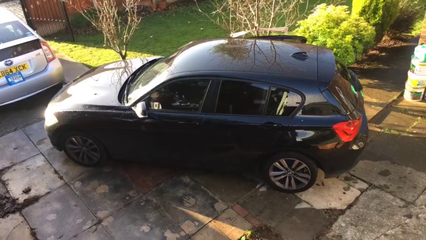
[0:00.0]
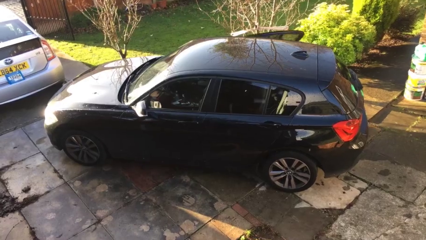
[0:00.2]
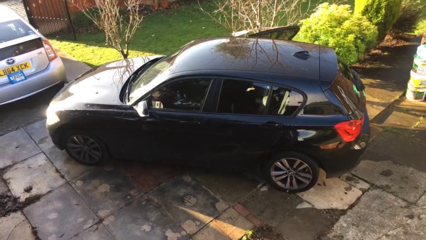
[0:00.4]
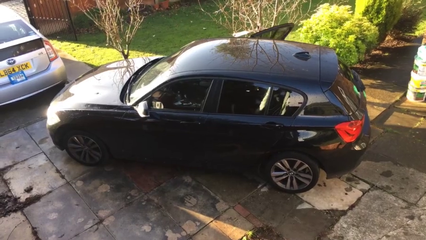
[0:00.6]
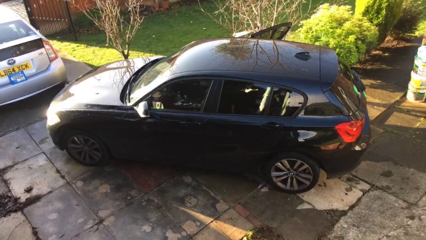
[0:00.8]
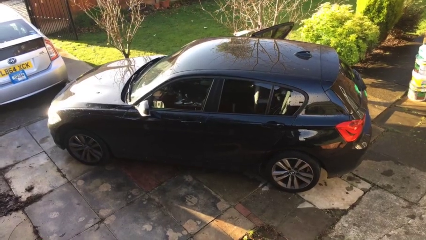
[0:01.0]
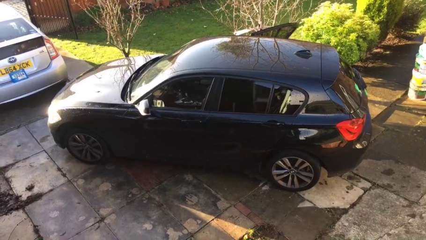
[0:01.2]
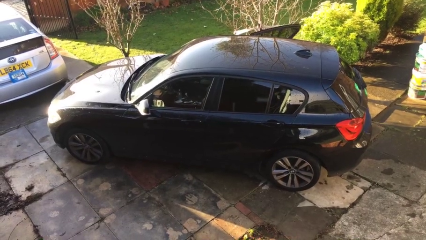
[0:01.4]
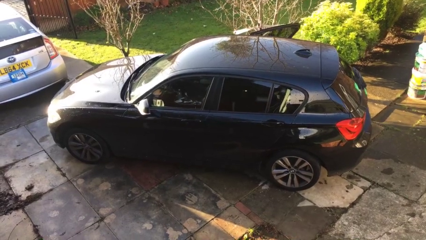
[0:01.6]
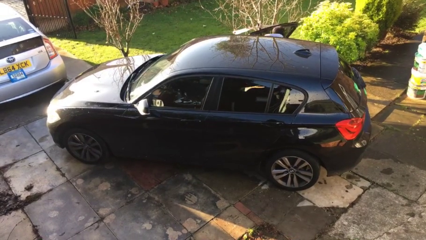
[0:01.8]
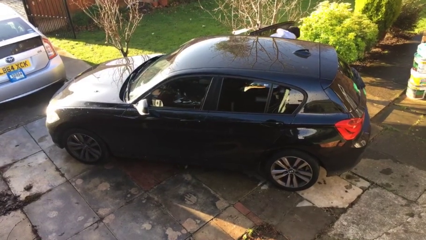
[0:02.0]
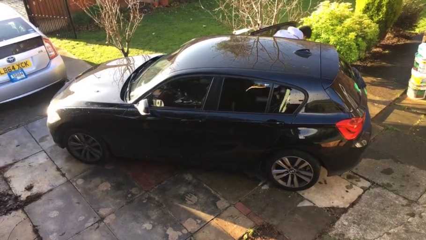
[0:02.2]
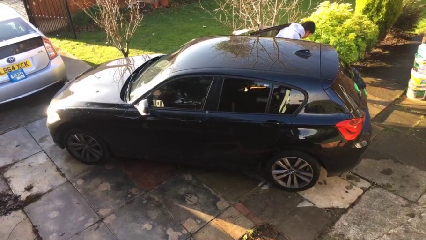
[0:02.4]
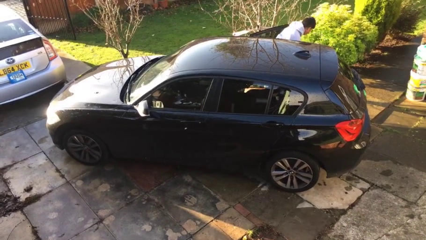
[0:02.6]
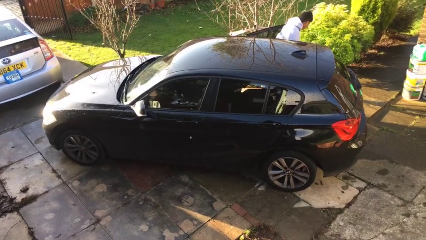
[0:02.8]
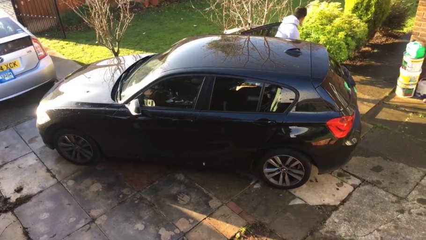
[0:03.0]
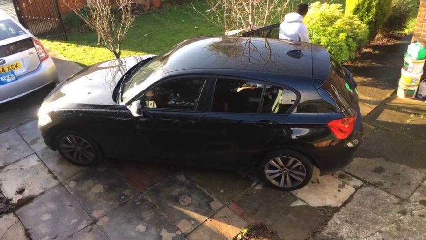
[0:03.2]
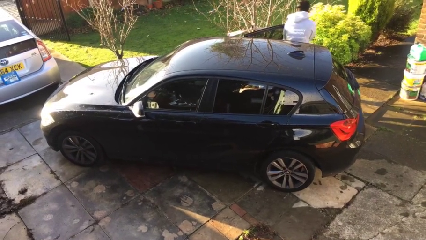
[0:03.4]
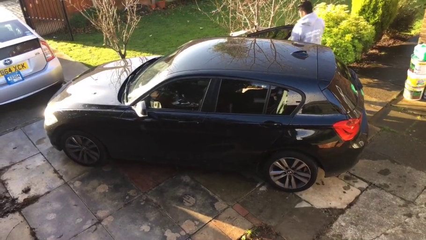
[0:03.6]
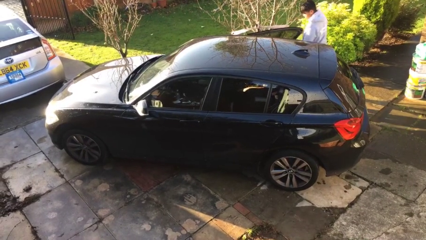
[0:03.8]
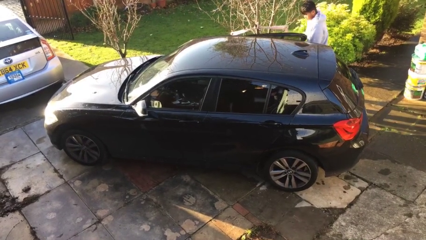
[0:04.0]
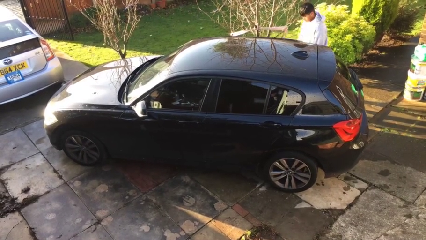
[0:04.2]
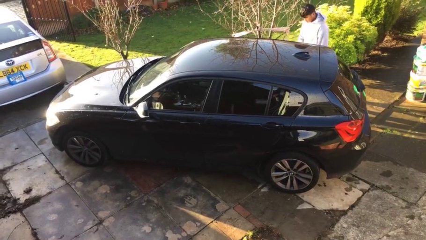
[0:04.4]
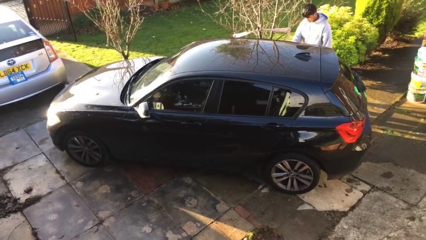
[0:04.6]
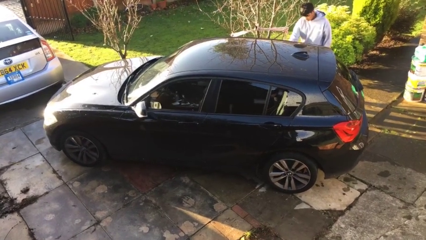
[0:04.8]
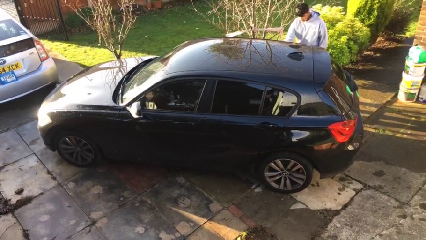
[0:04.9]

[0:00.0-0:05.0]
car drops off person

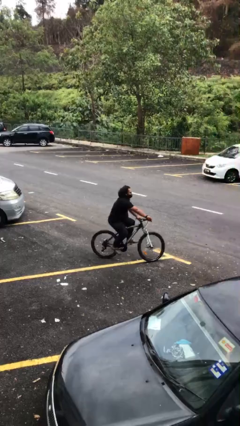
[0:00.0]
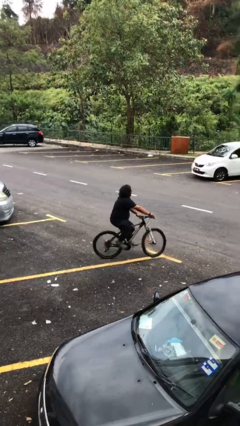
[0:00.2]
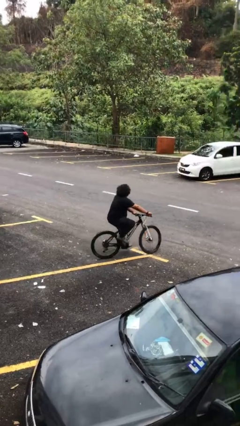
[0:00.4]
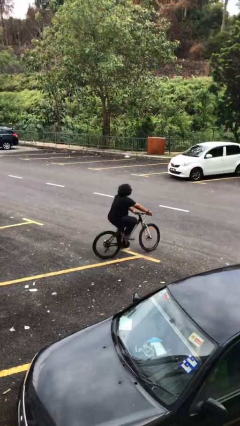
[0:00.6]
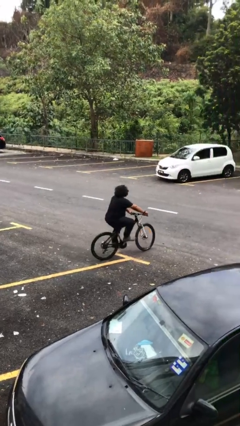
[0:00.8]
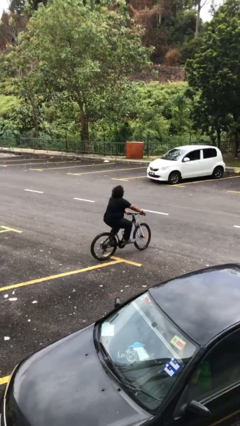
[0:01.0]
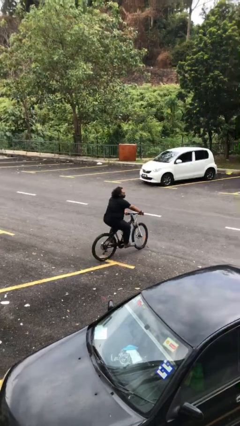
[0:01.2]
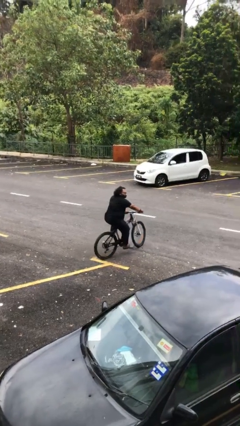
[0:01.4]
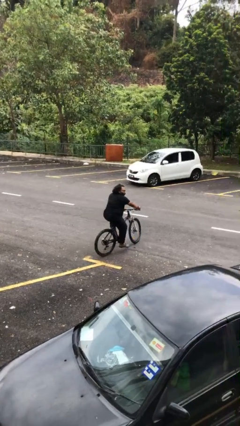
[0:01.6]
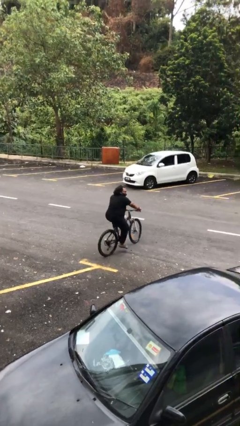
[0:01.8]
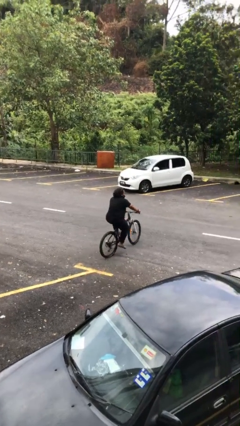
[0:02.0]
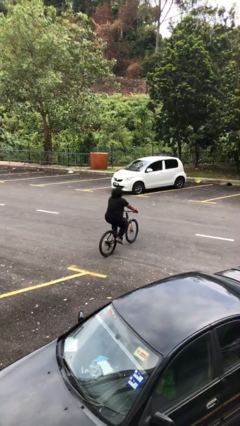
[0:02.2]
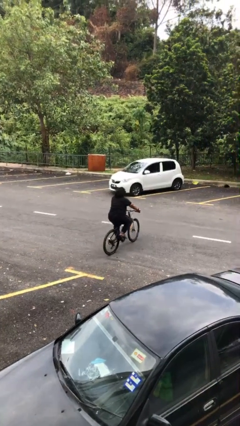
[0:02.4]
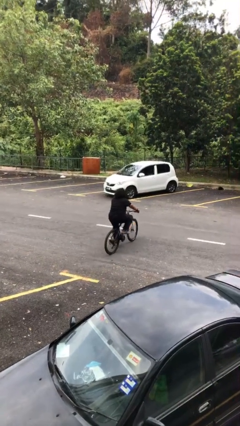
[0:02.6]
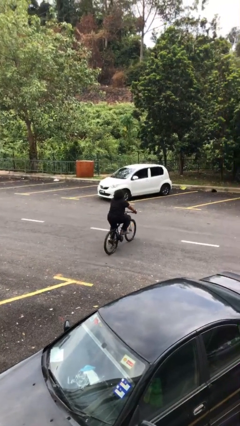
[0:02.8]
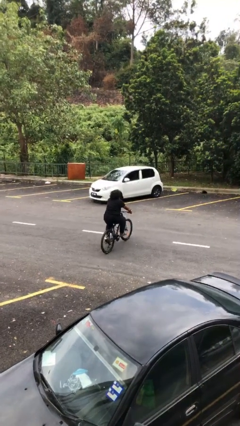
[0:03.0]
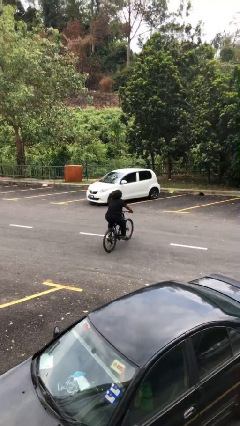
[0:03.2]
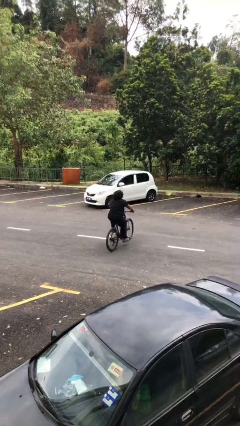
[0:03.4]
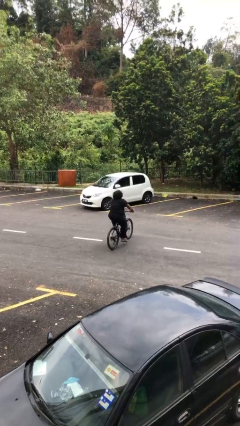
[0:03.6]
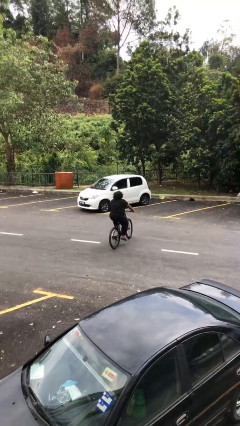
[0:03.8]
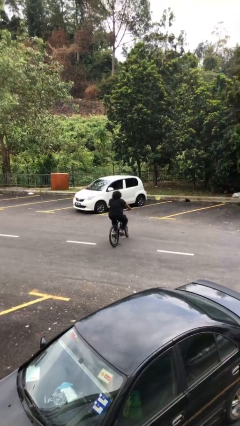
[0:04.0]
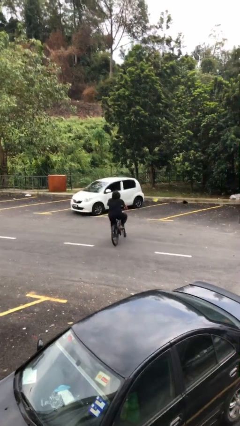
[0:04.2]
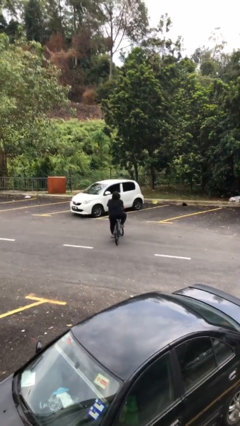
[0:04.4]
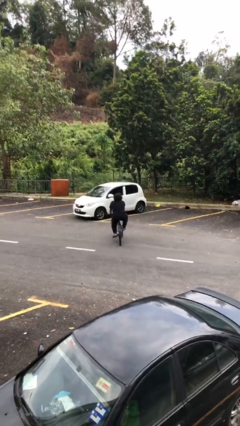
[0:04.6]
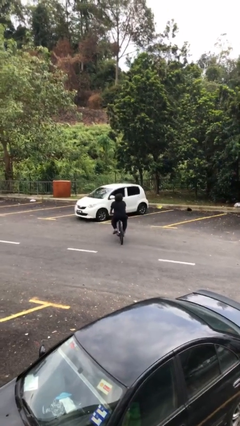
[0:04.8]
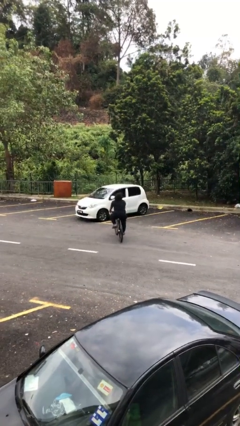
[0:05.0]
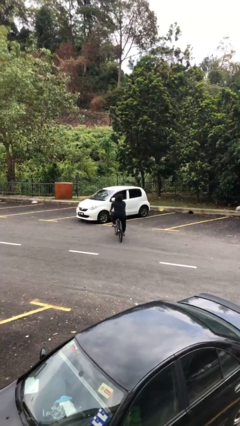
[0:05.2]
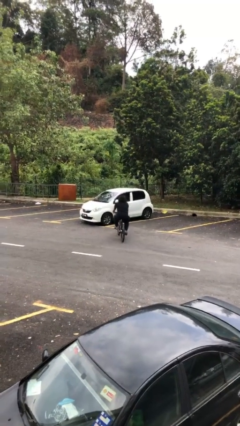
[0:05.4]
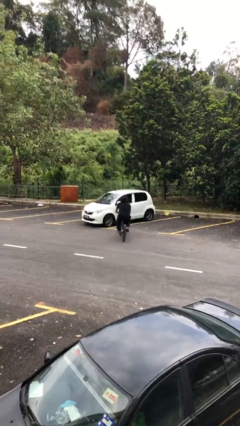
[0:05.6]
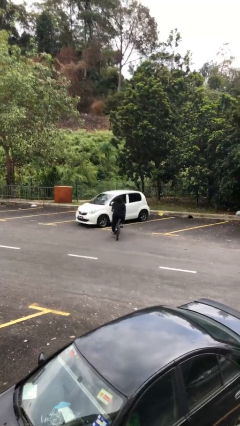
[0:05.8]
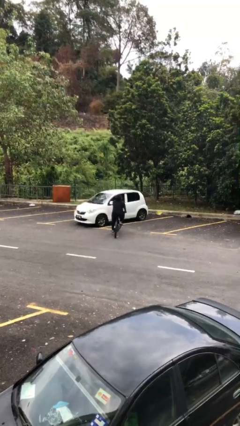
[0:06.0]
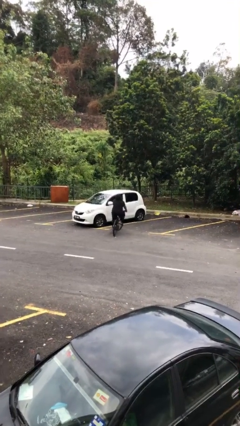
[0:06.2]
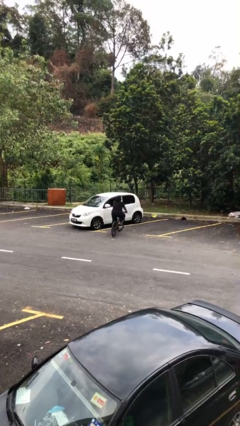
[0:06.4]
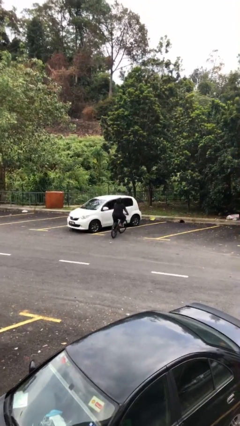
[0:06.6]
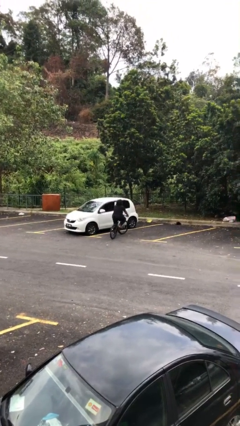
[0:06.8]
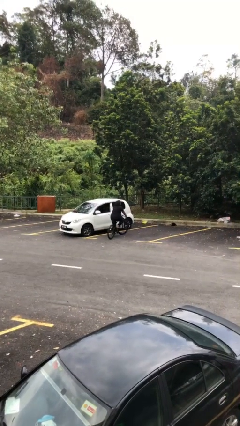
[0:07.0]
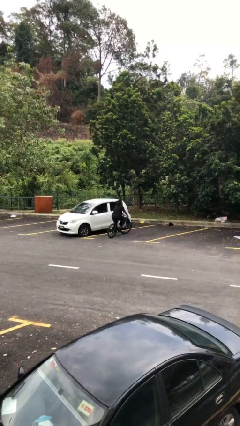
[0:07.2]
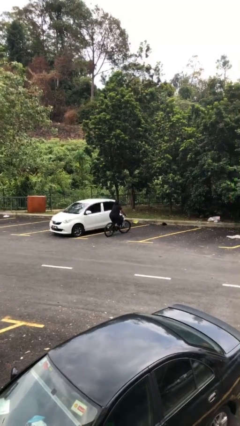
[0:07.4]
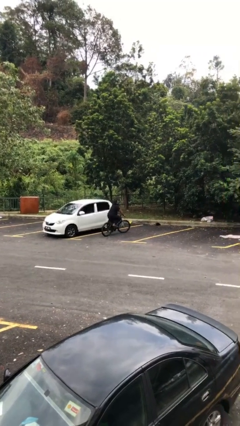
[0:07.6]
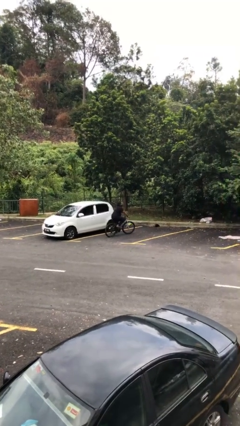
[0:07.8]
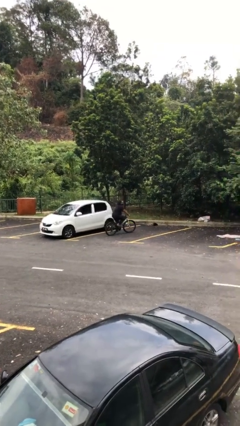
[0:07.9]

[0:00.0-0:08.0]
person rides bicycle

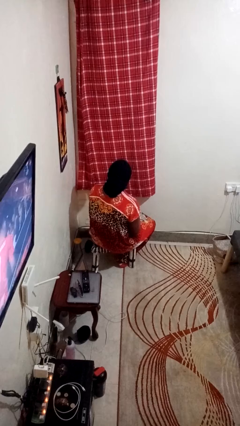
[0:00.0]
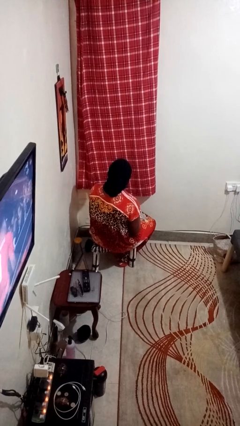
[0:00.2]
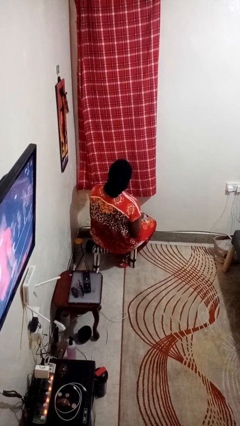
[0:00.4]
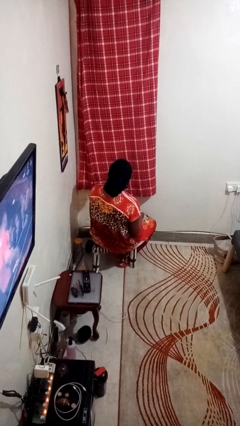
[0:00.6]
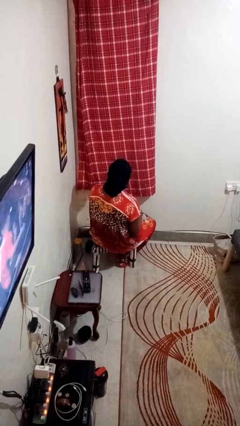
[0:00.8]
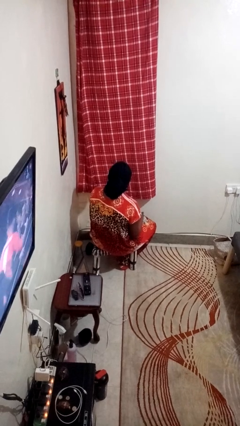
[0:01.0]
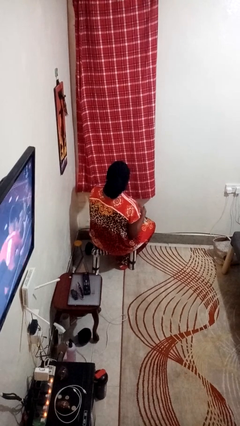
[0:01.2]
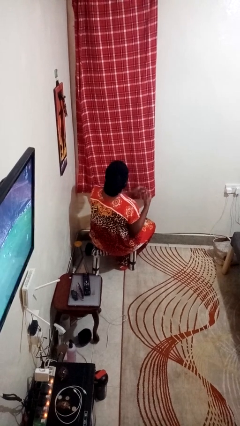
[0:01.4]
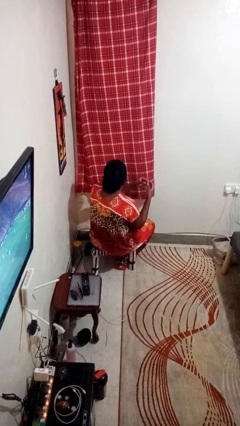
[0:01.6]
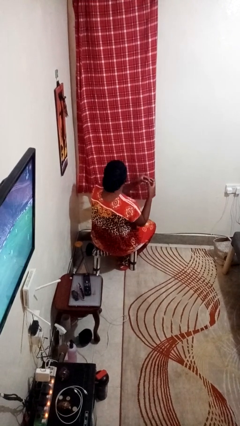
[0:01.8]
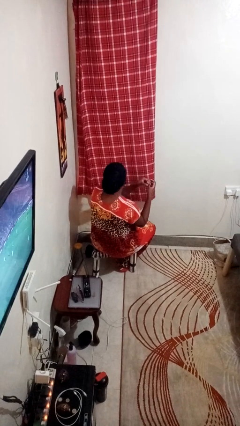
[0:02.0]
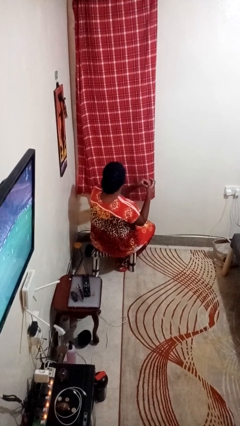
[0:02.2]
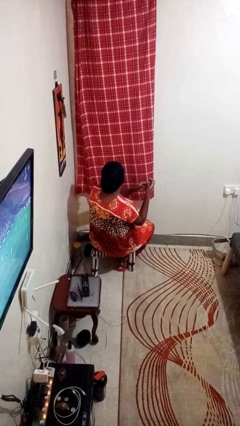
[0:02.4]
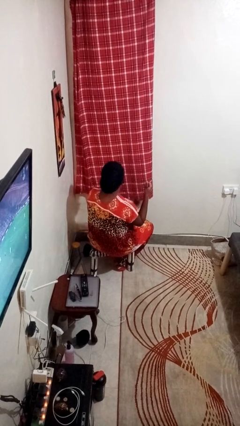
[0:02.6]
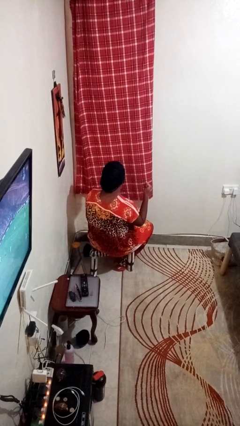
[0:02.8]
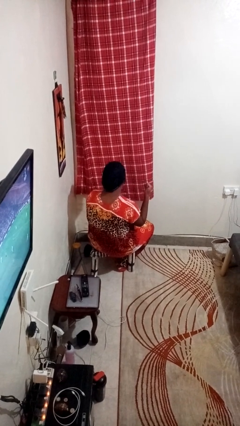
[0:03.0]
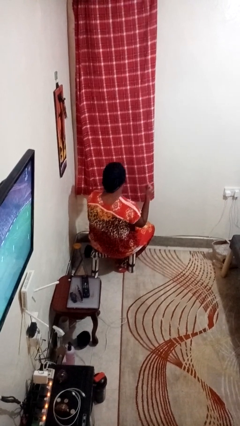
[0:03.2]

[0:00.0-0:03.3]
person puts on ring

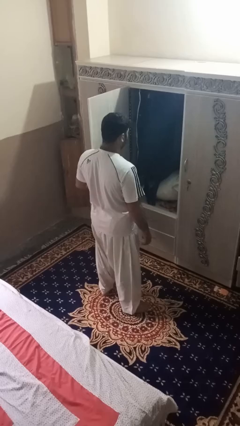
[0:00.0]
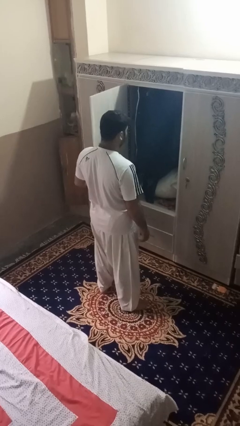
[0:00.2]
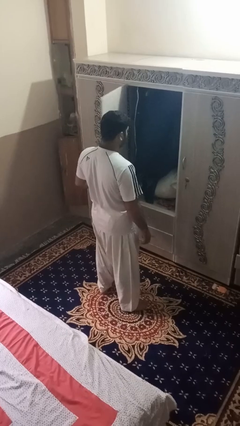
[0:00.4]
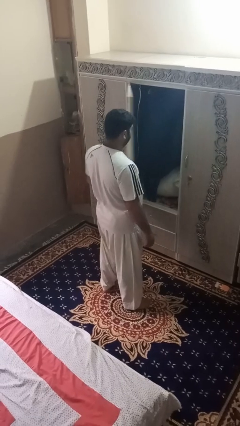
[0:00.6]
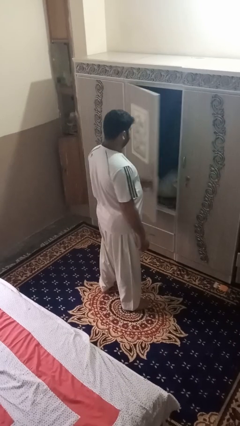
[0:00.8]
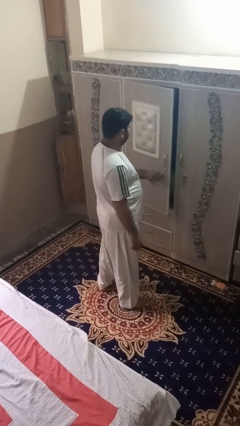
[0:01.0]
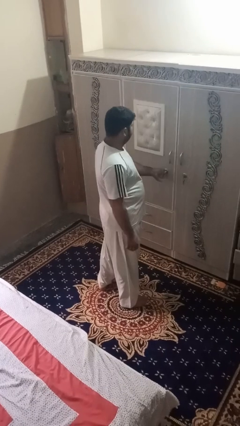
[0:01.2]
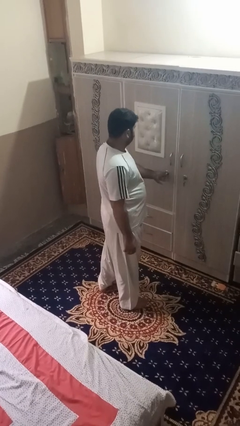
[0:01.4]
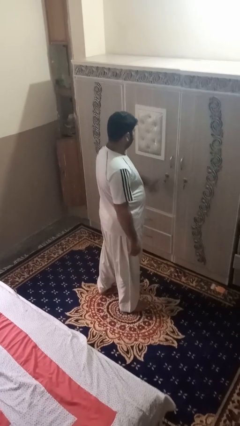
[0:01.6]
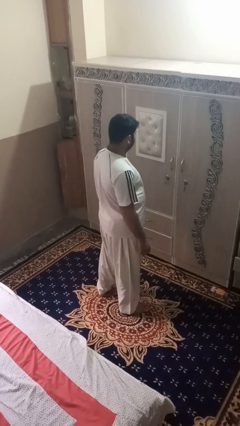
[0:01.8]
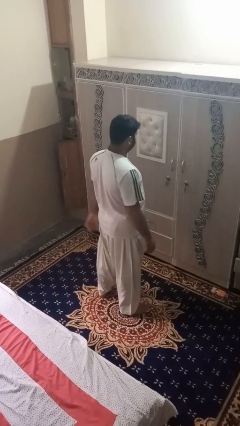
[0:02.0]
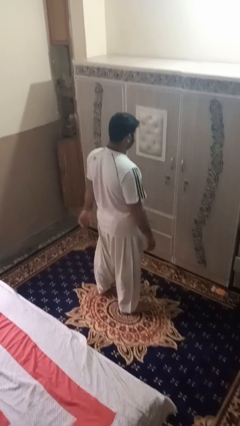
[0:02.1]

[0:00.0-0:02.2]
person closes dresser drawer
